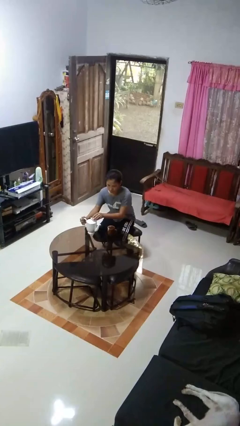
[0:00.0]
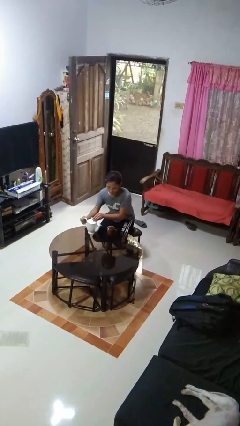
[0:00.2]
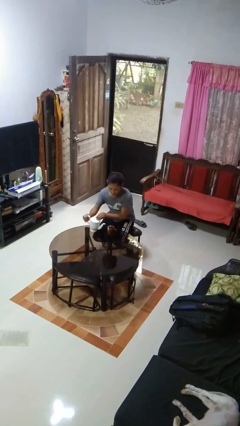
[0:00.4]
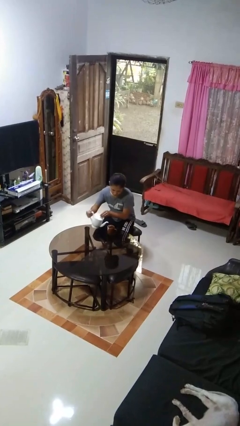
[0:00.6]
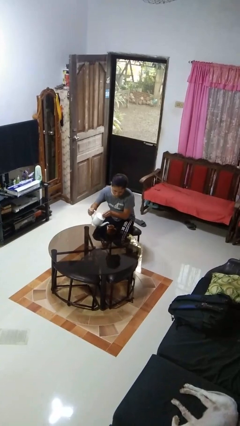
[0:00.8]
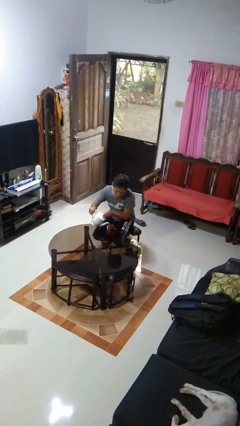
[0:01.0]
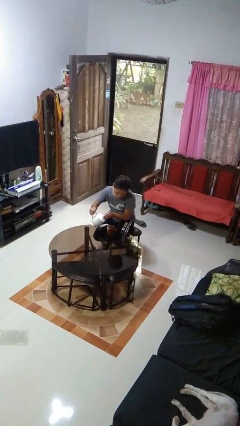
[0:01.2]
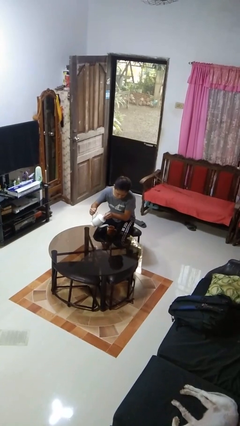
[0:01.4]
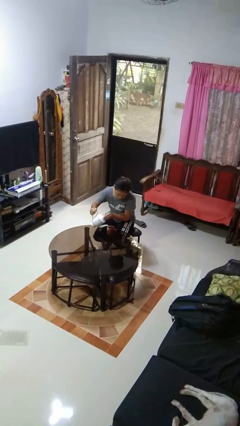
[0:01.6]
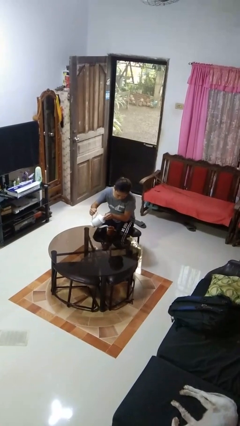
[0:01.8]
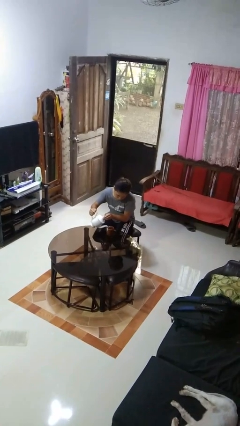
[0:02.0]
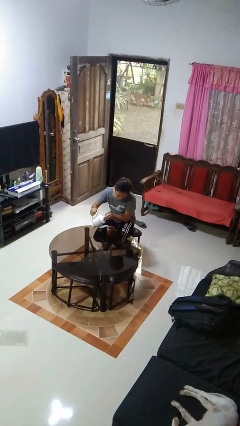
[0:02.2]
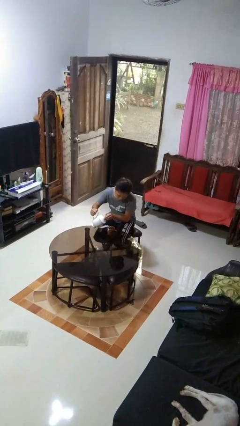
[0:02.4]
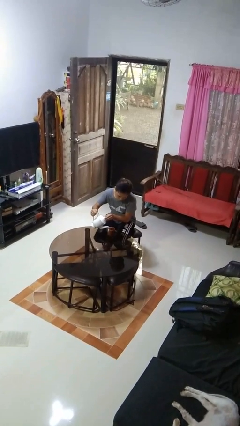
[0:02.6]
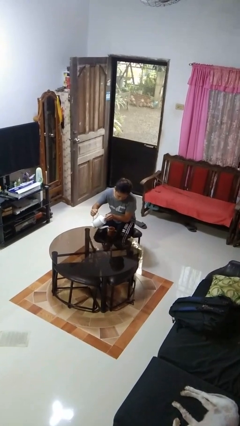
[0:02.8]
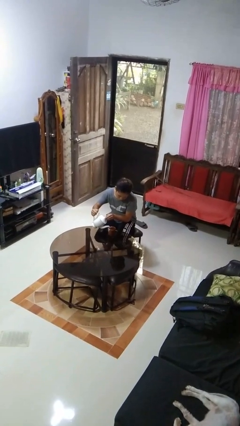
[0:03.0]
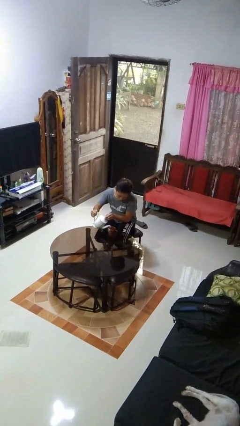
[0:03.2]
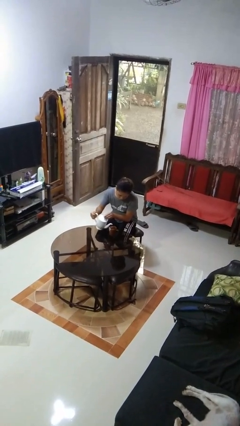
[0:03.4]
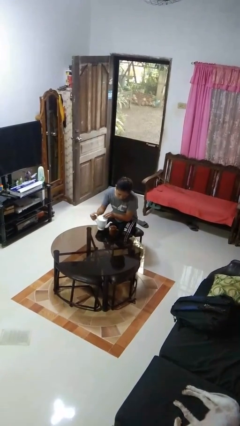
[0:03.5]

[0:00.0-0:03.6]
person pours coffee into mug

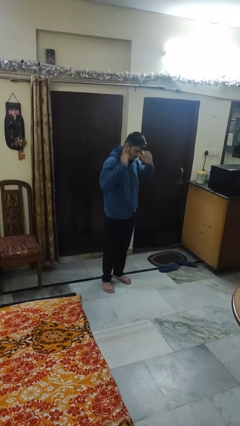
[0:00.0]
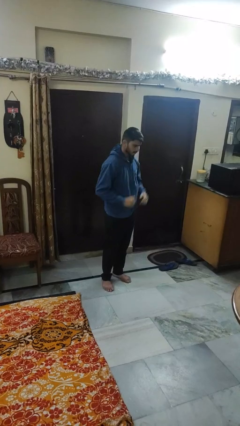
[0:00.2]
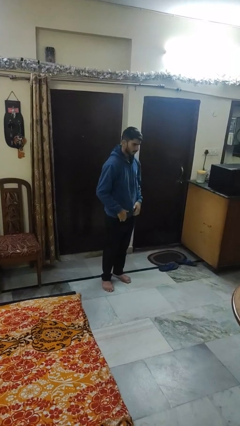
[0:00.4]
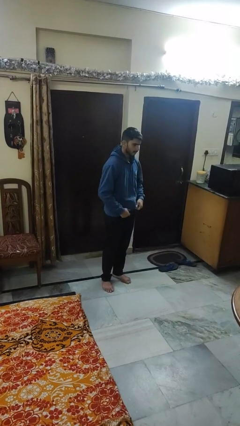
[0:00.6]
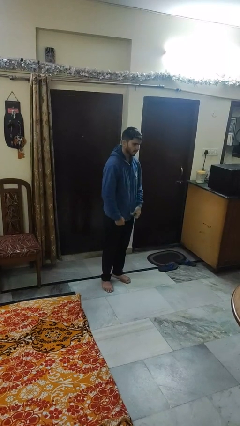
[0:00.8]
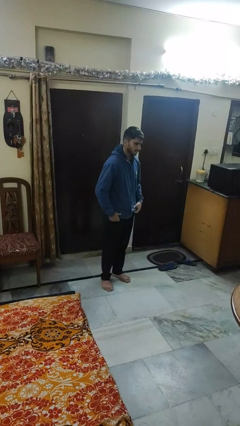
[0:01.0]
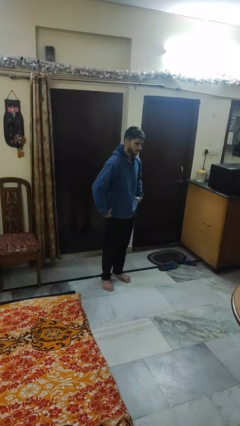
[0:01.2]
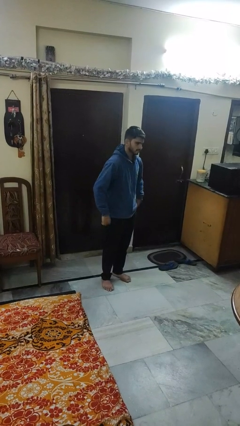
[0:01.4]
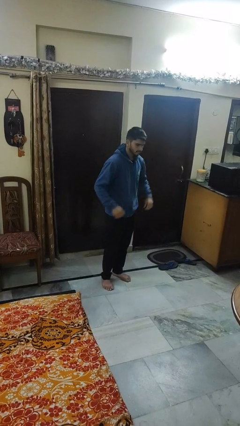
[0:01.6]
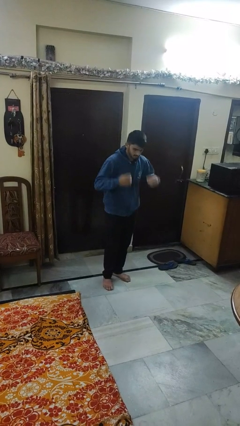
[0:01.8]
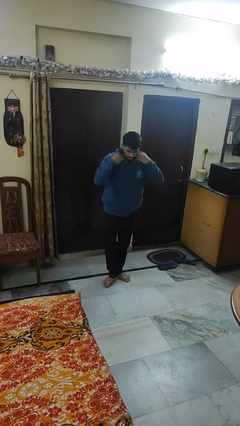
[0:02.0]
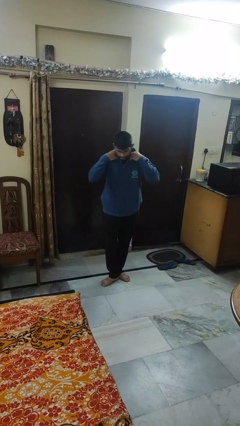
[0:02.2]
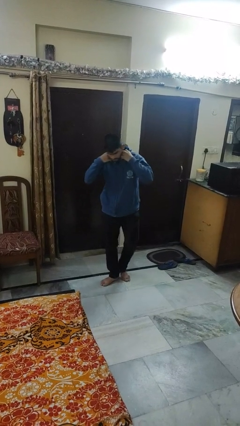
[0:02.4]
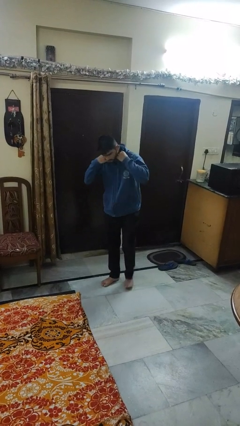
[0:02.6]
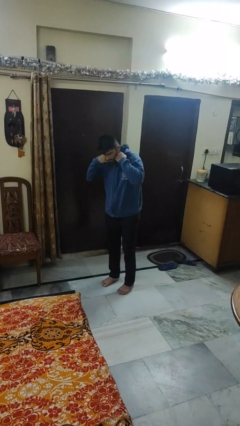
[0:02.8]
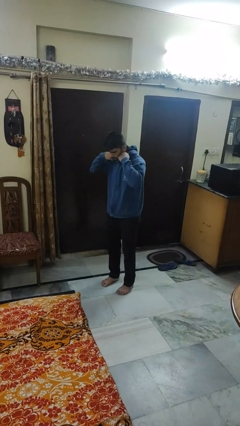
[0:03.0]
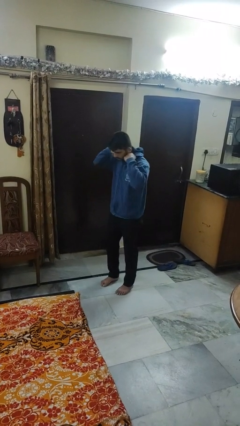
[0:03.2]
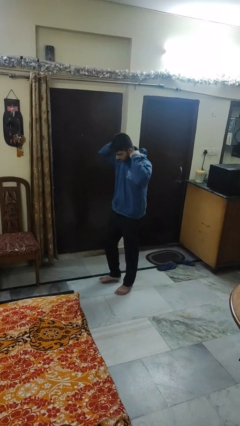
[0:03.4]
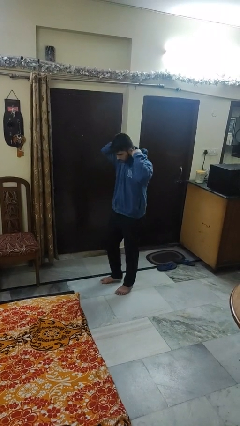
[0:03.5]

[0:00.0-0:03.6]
person takes off hoodie

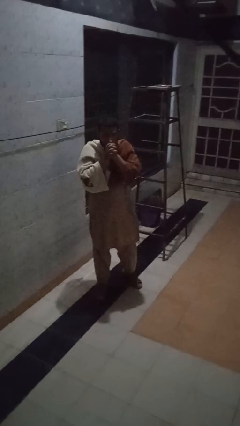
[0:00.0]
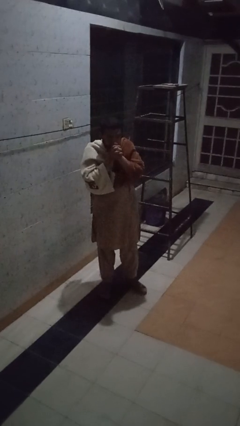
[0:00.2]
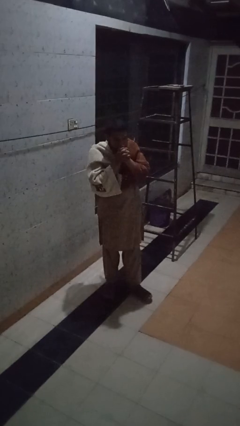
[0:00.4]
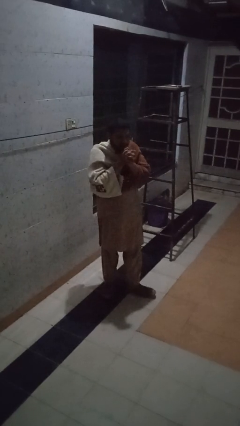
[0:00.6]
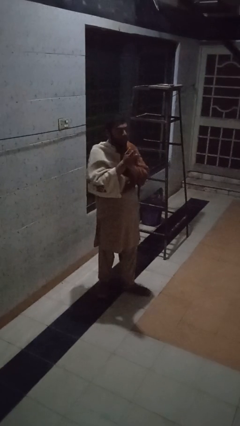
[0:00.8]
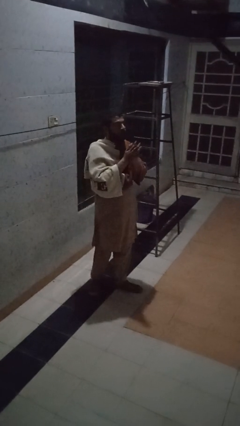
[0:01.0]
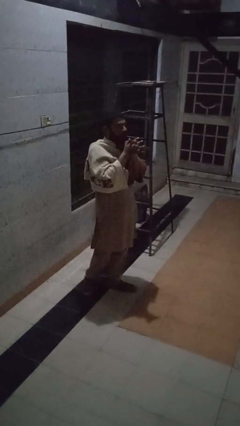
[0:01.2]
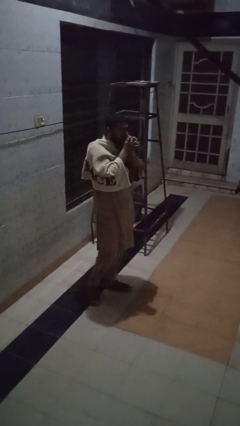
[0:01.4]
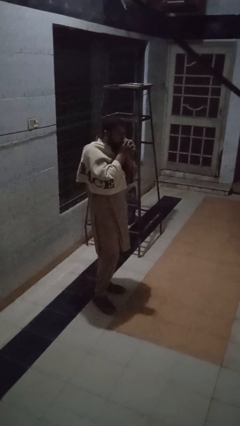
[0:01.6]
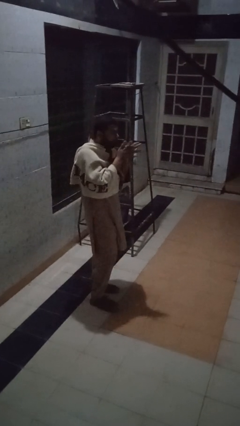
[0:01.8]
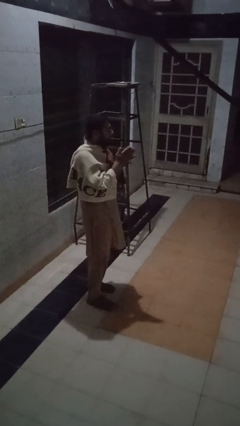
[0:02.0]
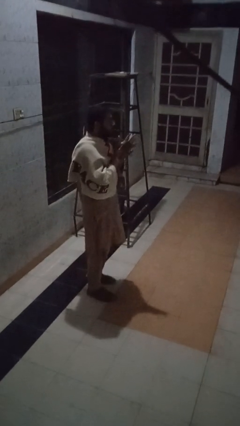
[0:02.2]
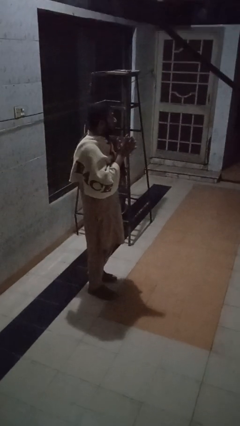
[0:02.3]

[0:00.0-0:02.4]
person blows into hands

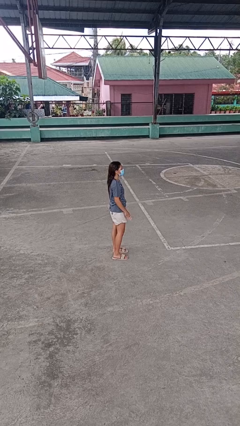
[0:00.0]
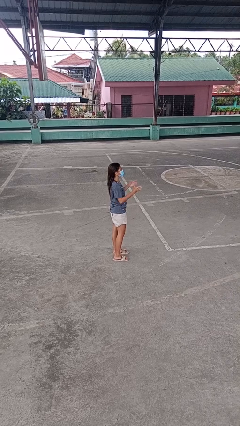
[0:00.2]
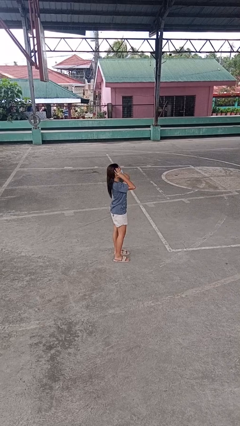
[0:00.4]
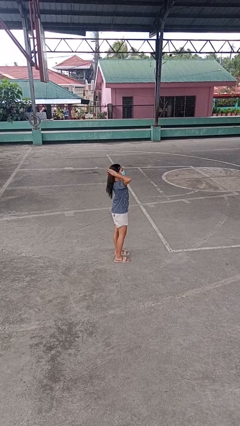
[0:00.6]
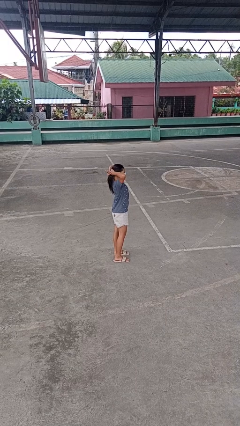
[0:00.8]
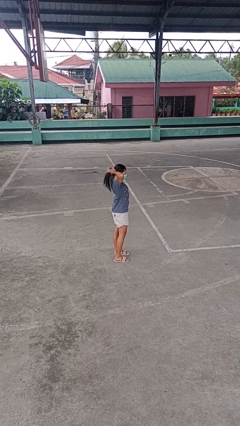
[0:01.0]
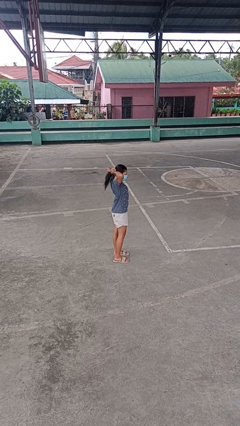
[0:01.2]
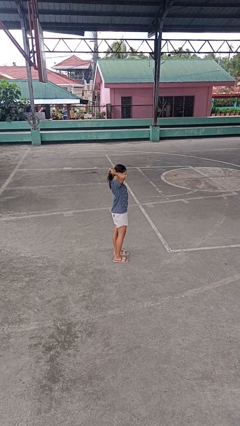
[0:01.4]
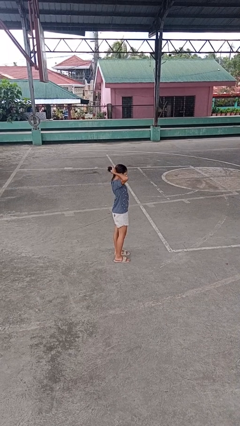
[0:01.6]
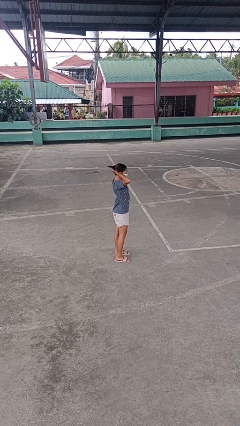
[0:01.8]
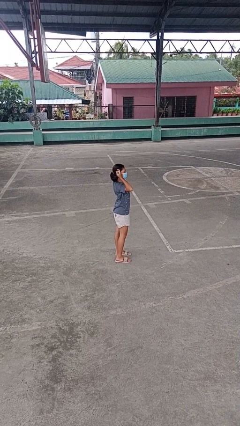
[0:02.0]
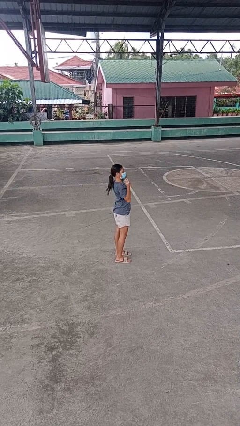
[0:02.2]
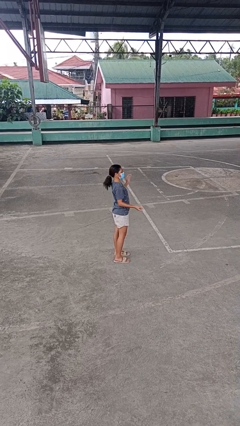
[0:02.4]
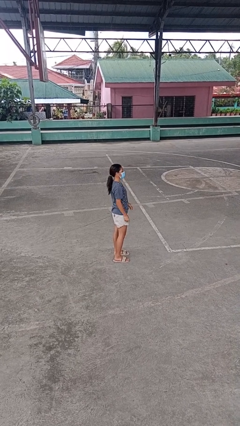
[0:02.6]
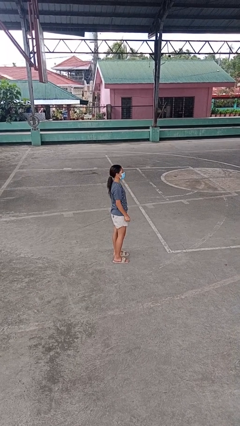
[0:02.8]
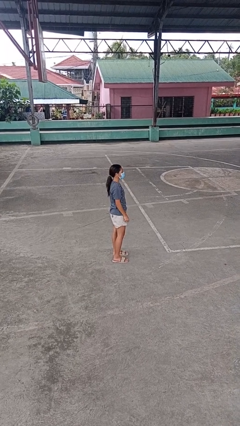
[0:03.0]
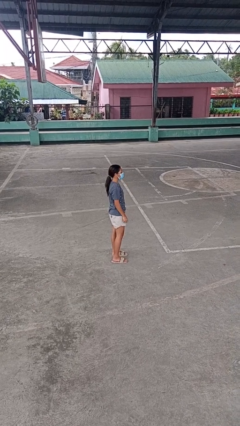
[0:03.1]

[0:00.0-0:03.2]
person puts hair in ponytail

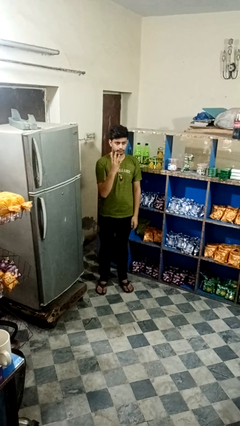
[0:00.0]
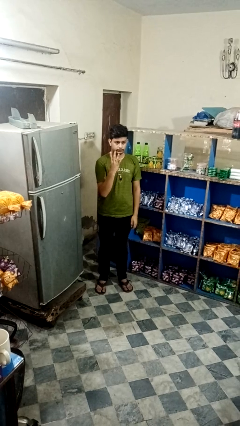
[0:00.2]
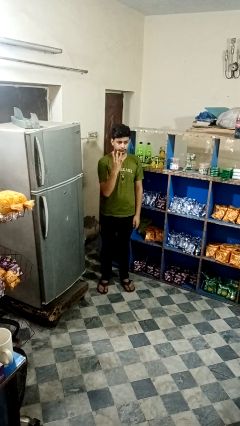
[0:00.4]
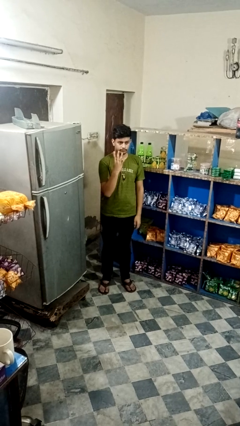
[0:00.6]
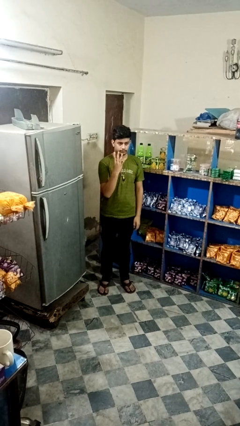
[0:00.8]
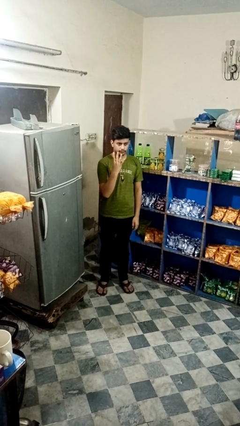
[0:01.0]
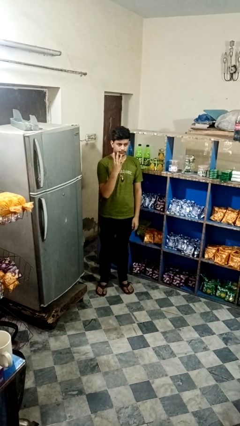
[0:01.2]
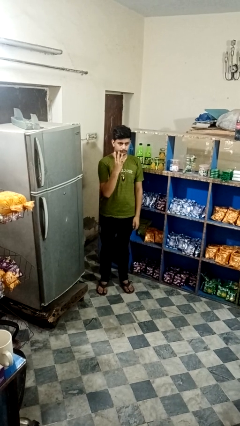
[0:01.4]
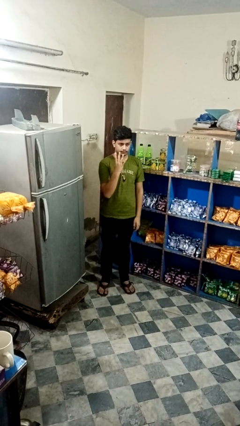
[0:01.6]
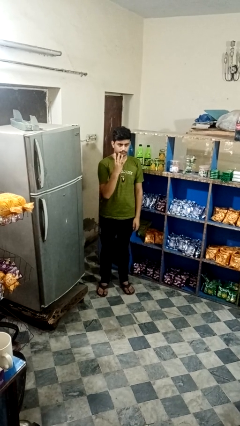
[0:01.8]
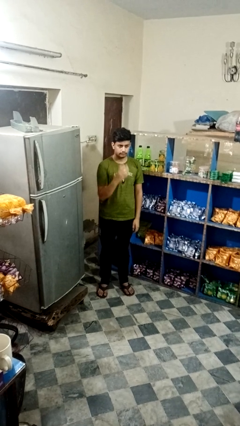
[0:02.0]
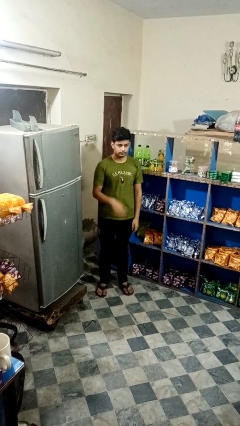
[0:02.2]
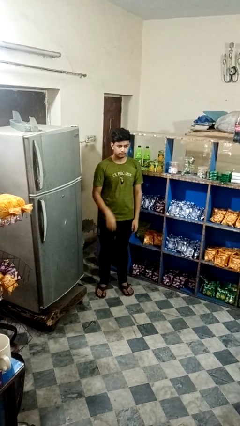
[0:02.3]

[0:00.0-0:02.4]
person gestures number four

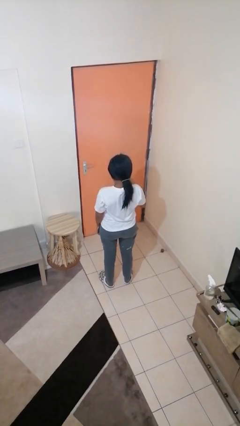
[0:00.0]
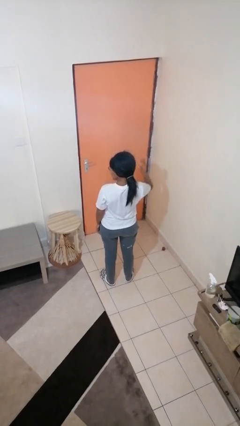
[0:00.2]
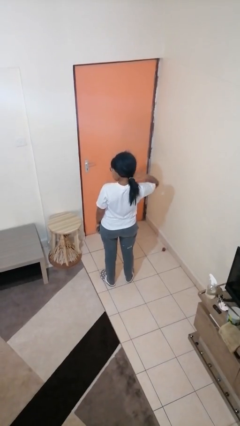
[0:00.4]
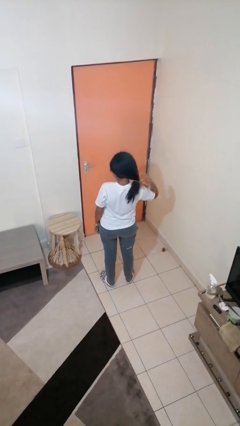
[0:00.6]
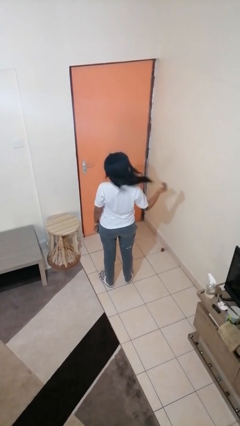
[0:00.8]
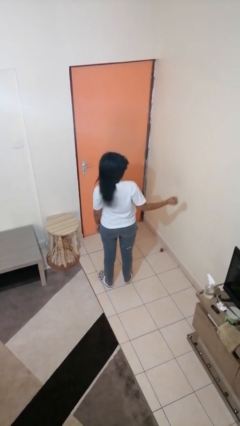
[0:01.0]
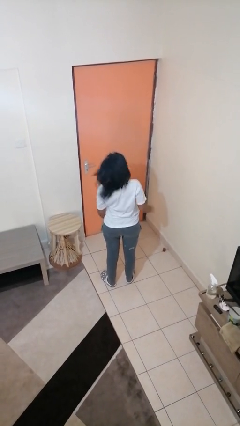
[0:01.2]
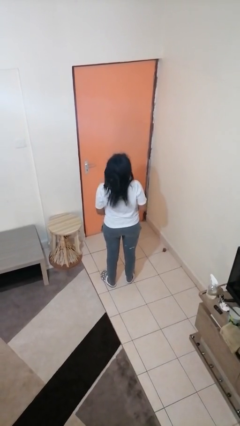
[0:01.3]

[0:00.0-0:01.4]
person takes off hairtie

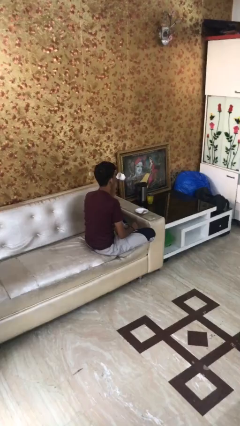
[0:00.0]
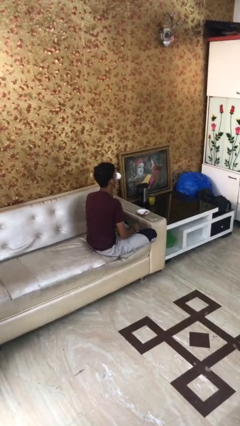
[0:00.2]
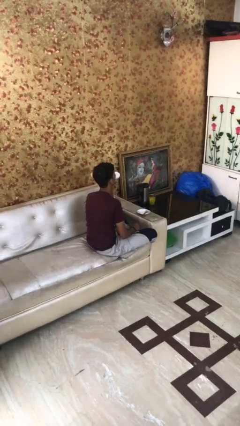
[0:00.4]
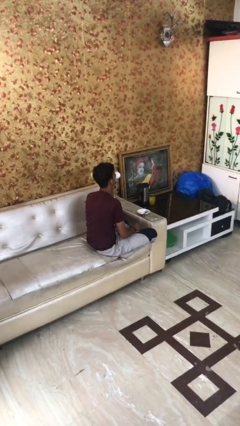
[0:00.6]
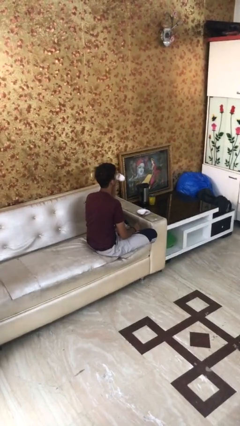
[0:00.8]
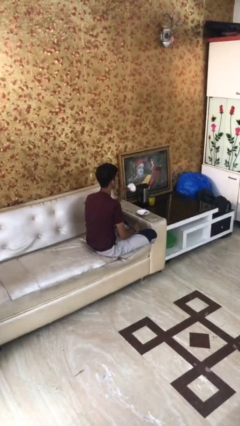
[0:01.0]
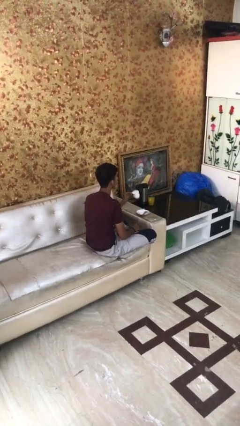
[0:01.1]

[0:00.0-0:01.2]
person drinks from mug
